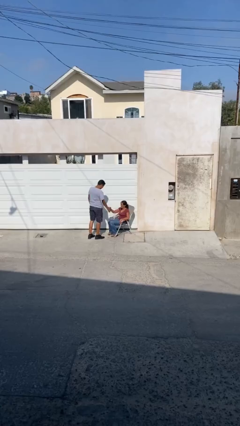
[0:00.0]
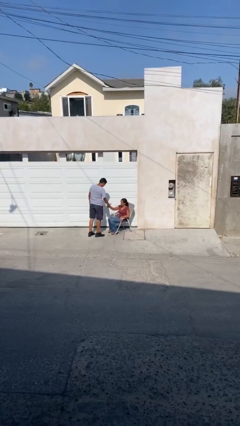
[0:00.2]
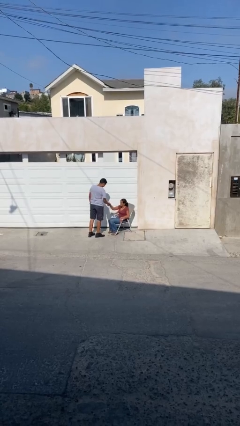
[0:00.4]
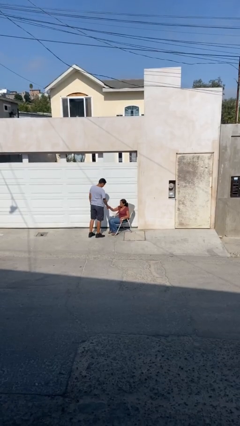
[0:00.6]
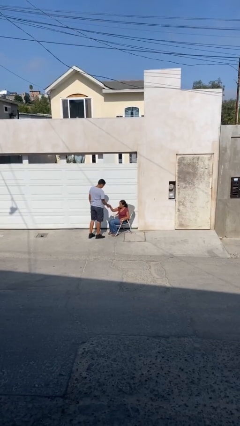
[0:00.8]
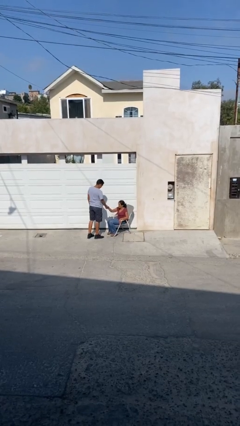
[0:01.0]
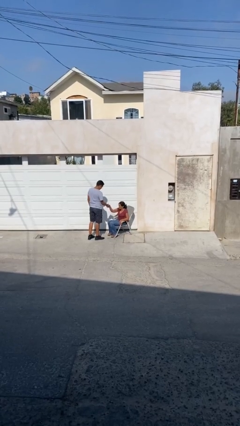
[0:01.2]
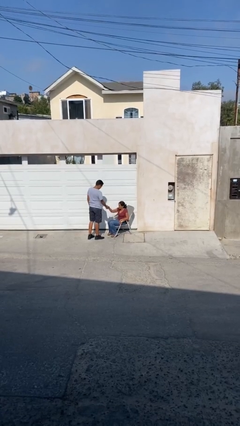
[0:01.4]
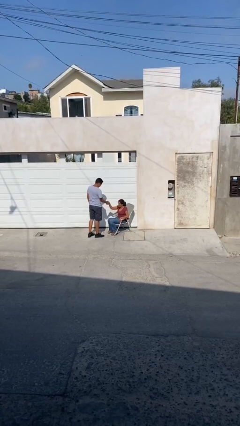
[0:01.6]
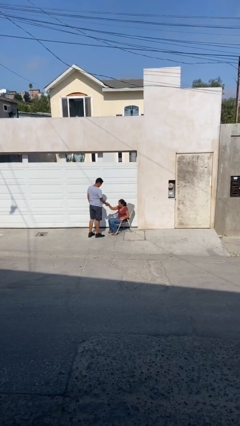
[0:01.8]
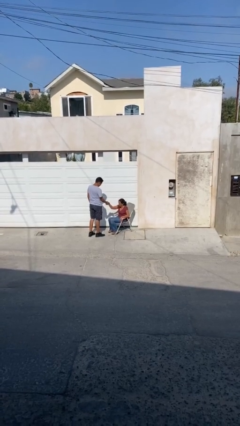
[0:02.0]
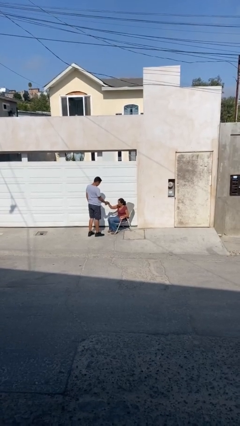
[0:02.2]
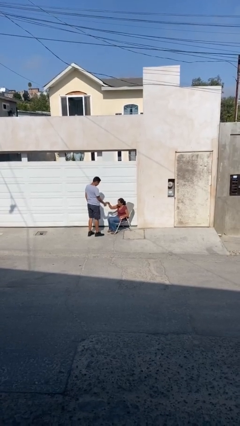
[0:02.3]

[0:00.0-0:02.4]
person shakes hand

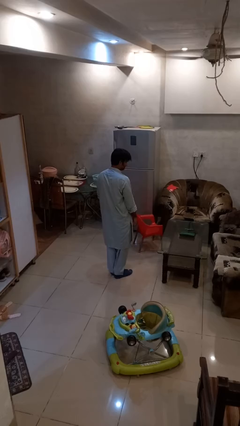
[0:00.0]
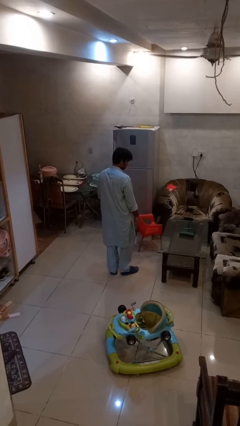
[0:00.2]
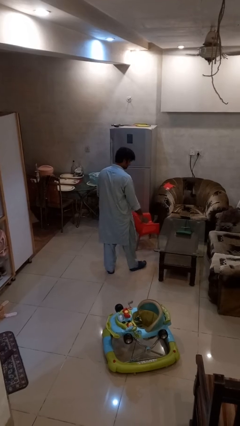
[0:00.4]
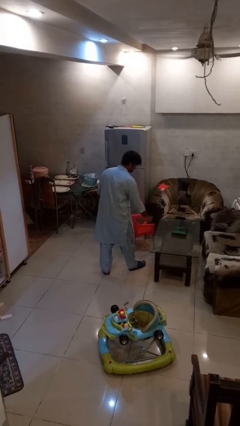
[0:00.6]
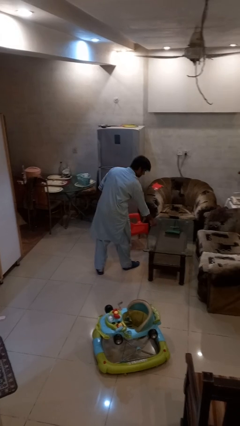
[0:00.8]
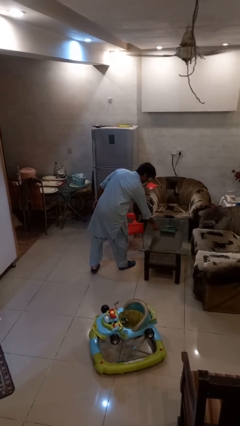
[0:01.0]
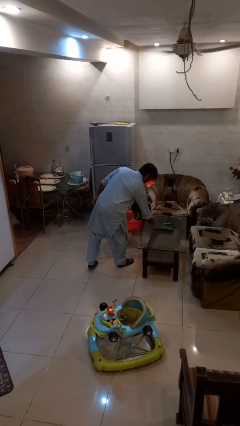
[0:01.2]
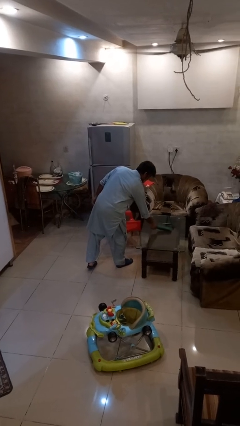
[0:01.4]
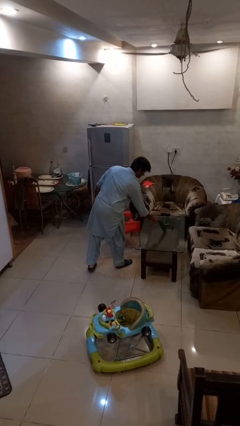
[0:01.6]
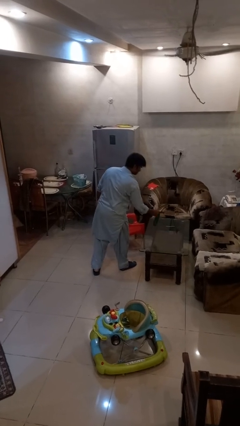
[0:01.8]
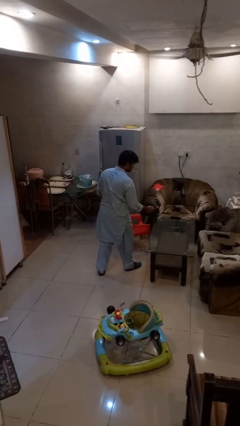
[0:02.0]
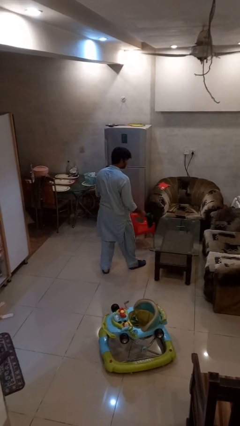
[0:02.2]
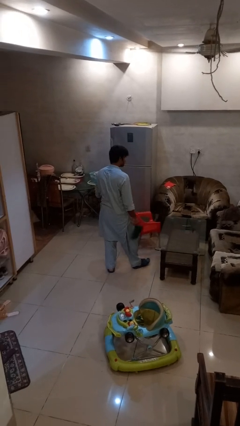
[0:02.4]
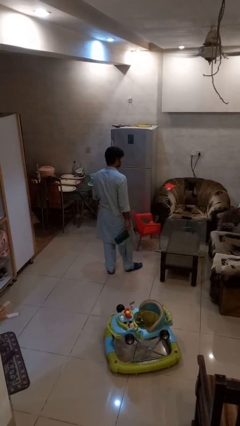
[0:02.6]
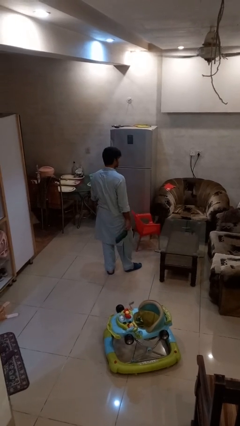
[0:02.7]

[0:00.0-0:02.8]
person picks up object from table

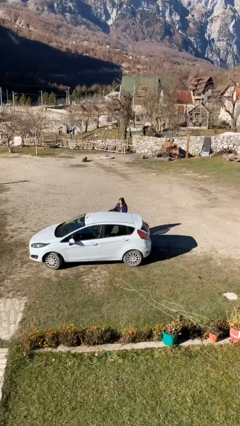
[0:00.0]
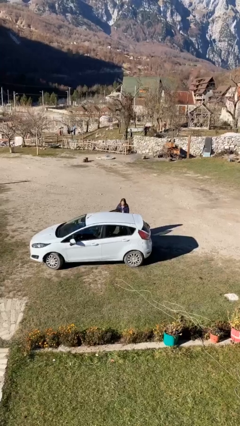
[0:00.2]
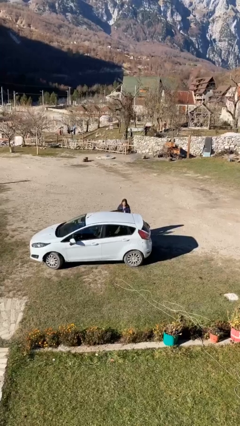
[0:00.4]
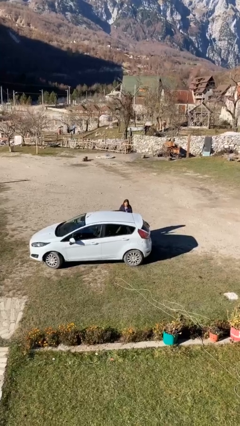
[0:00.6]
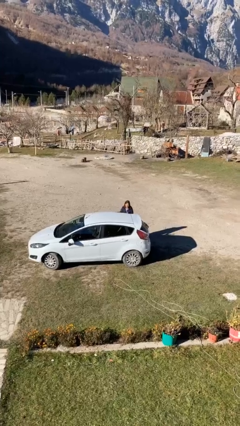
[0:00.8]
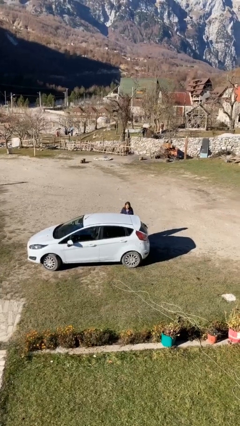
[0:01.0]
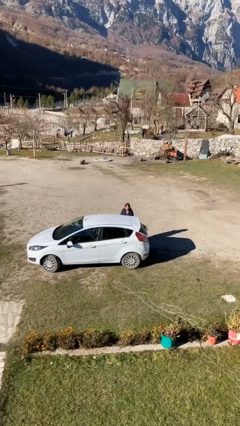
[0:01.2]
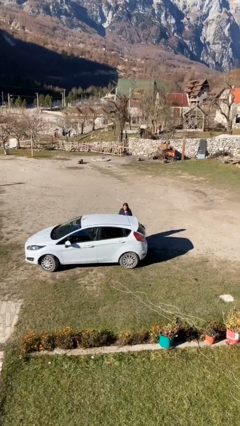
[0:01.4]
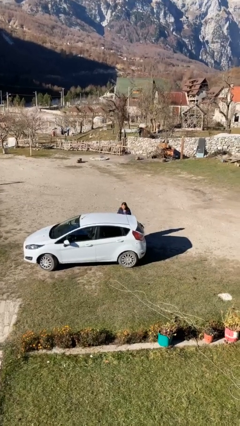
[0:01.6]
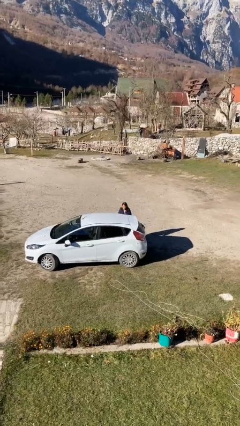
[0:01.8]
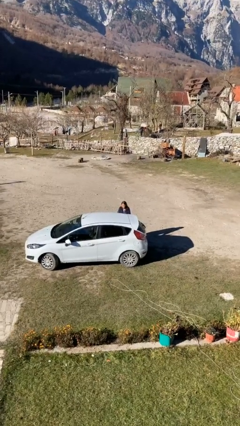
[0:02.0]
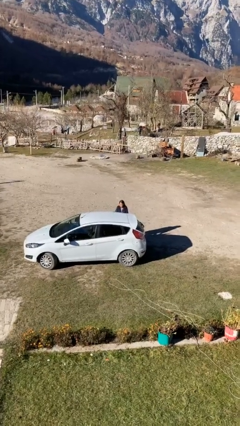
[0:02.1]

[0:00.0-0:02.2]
person closes car door

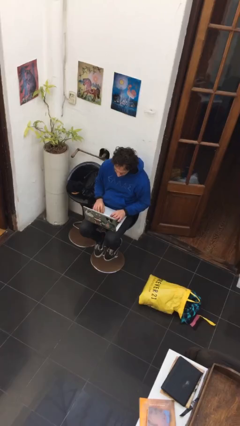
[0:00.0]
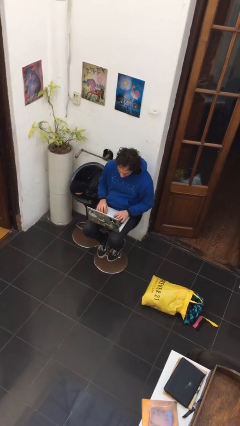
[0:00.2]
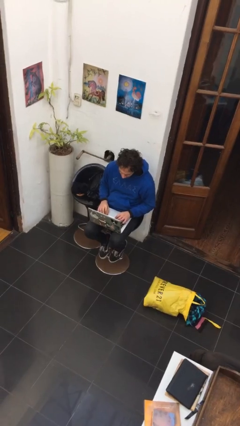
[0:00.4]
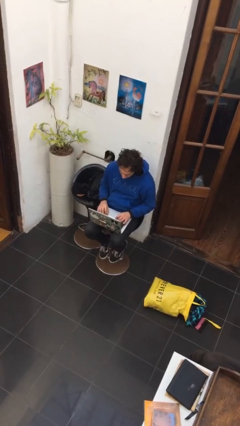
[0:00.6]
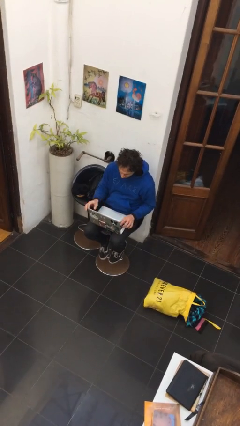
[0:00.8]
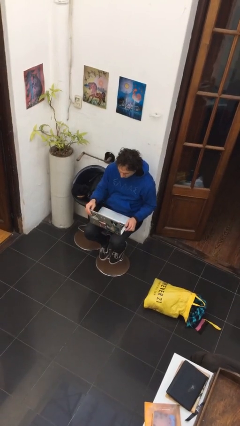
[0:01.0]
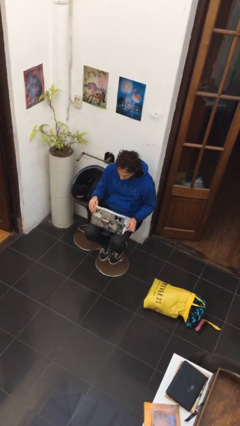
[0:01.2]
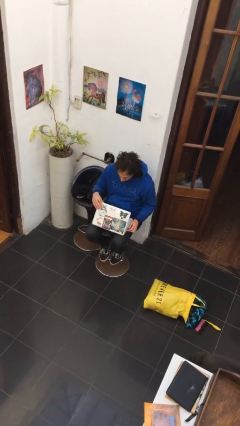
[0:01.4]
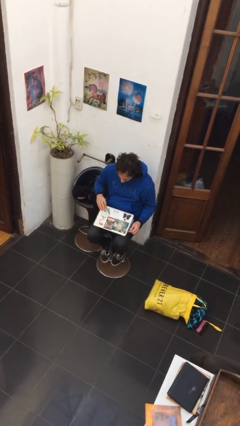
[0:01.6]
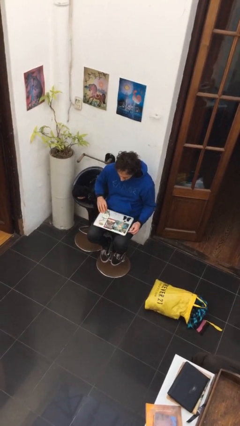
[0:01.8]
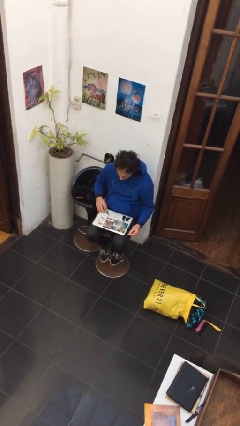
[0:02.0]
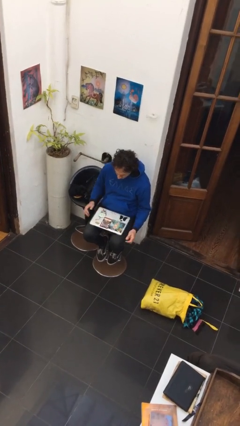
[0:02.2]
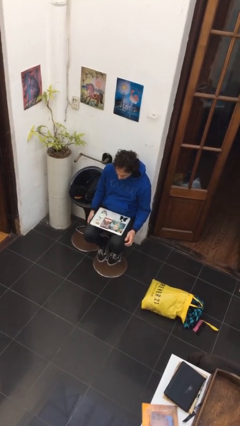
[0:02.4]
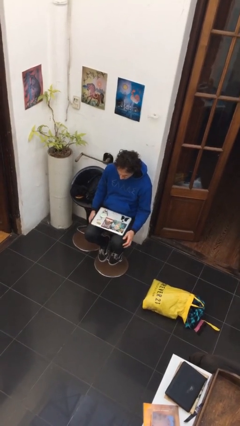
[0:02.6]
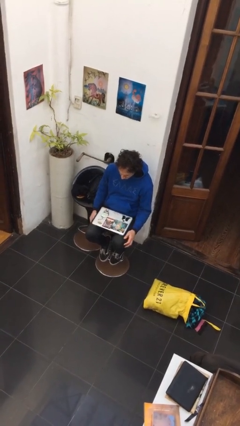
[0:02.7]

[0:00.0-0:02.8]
person closes laptop

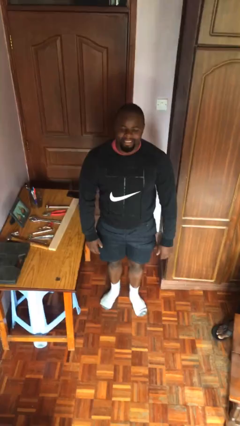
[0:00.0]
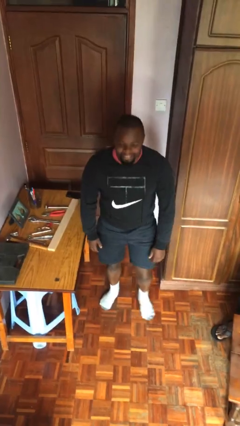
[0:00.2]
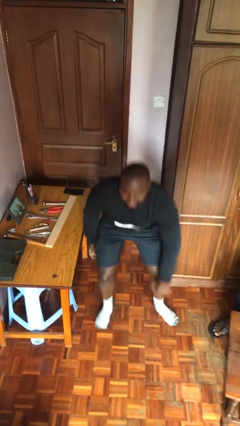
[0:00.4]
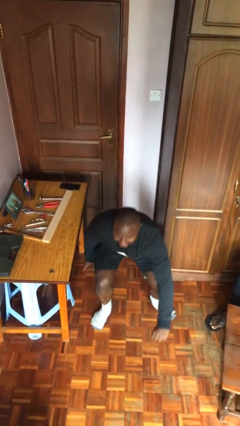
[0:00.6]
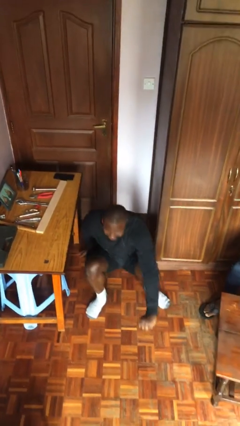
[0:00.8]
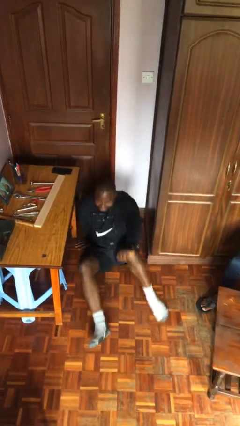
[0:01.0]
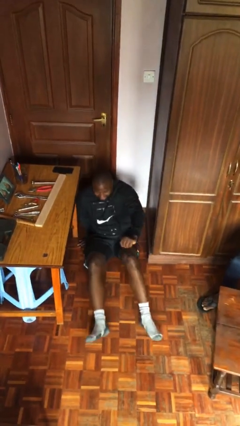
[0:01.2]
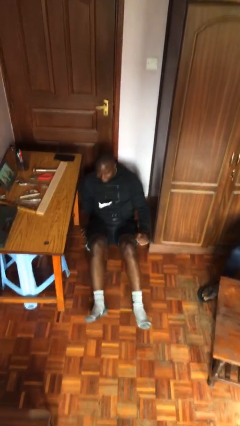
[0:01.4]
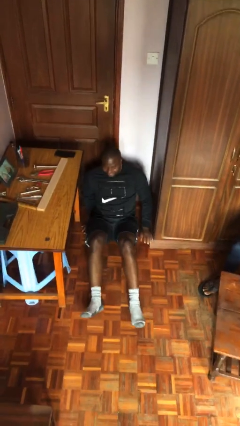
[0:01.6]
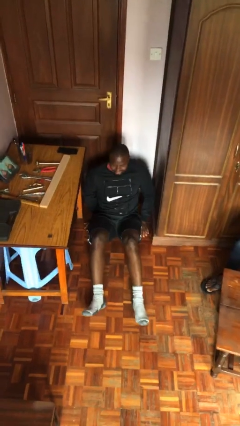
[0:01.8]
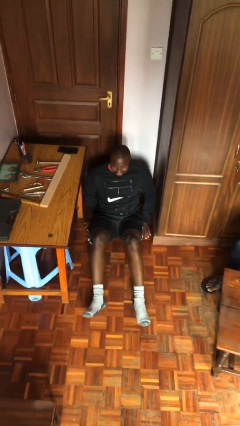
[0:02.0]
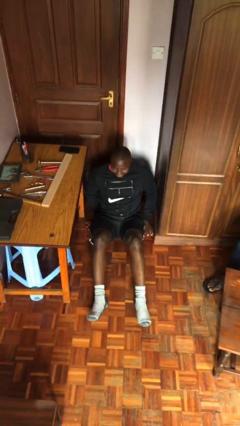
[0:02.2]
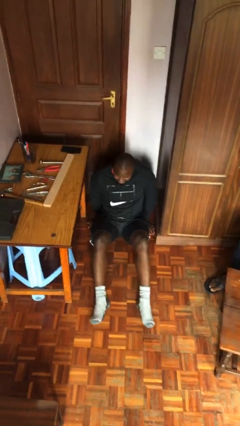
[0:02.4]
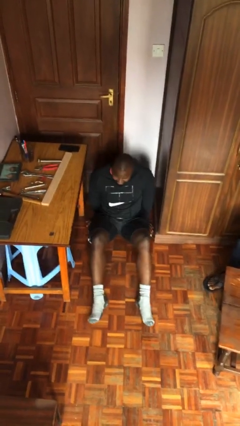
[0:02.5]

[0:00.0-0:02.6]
person sits down

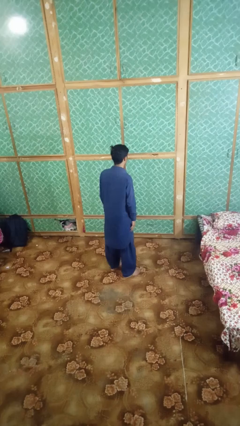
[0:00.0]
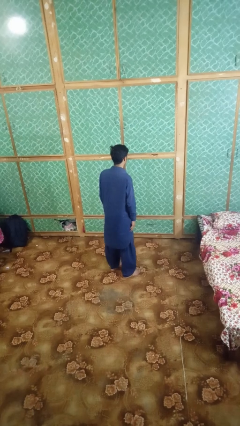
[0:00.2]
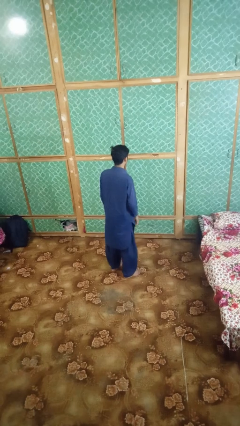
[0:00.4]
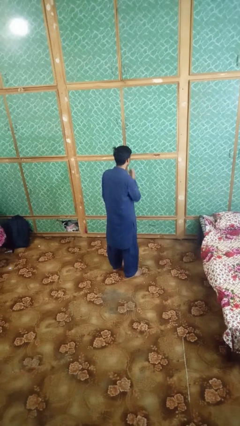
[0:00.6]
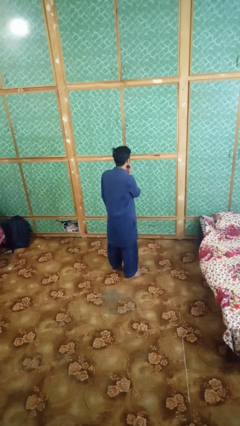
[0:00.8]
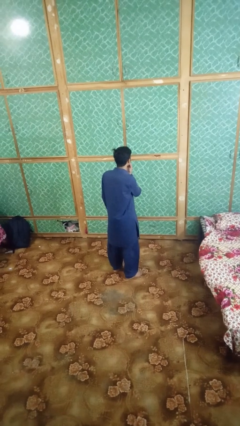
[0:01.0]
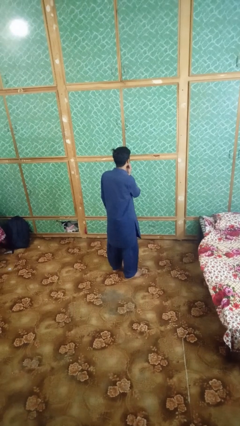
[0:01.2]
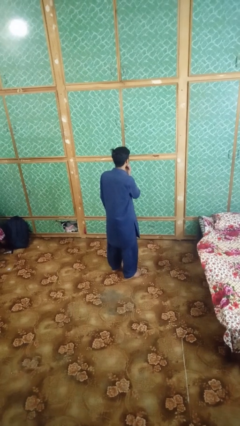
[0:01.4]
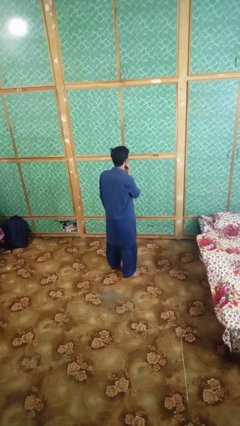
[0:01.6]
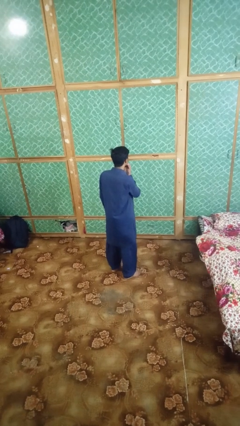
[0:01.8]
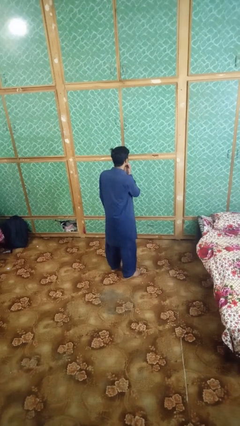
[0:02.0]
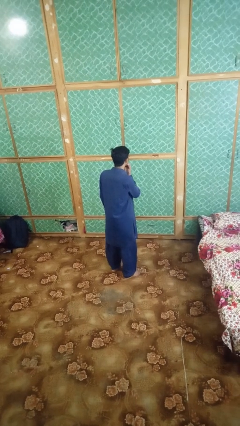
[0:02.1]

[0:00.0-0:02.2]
person strokes chin

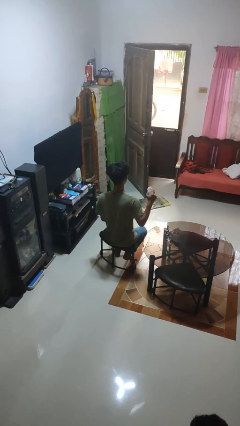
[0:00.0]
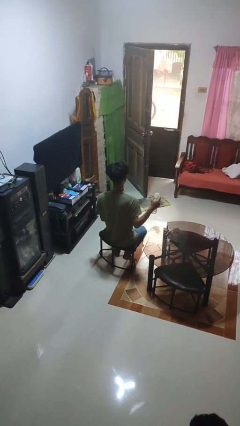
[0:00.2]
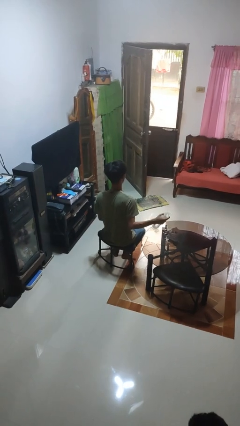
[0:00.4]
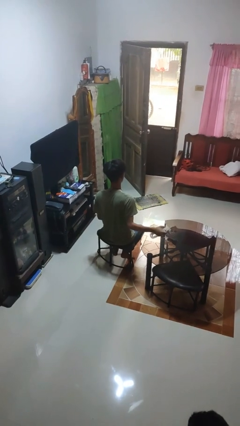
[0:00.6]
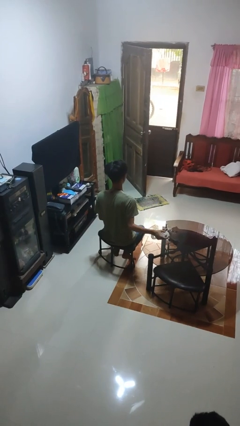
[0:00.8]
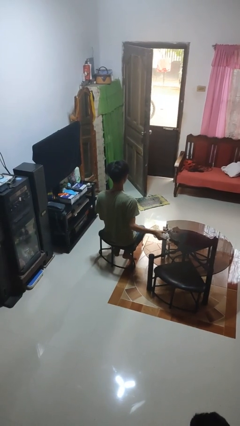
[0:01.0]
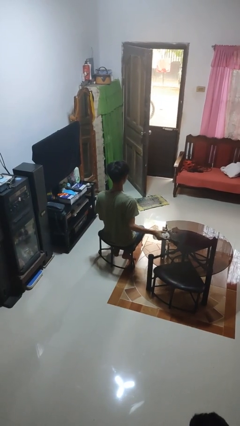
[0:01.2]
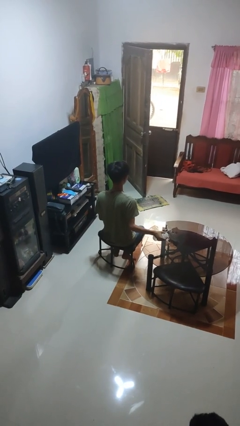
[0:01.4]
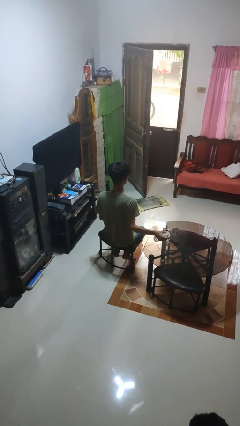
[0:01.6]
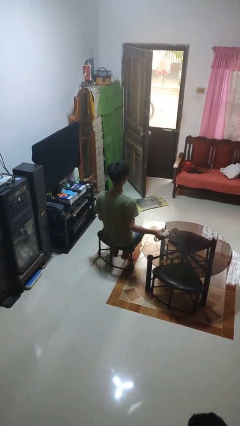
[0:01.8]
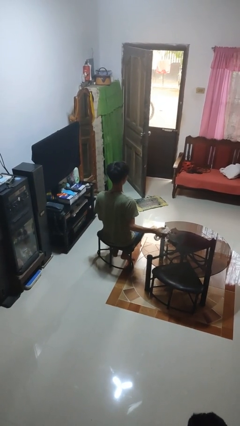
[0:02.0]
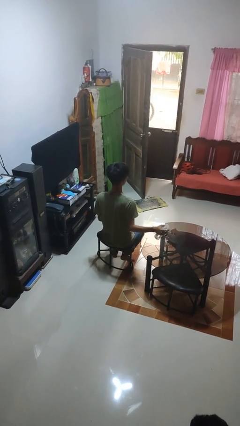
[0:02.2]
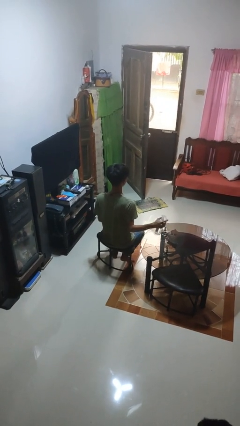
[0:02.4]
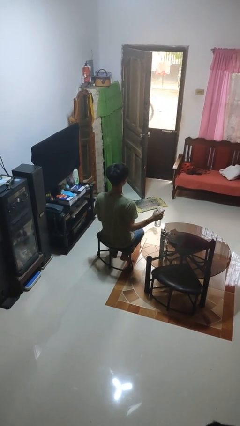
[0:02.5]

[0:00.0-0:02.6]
person sprays from bottle

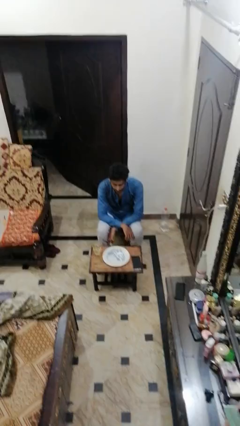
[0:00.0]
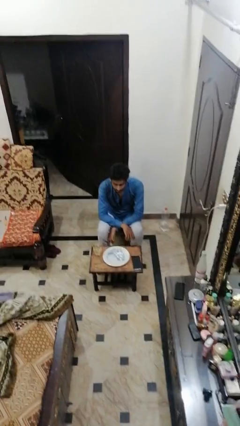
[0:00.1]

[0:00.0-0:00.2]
person drinks from cup
